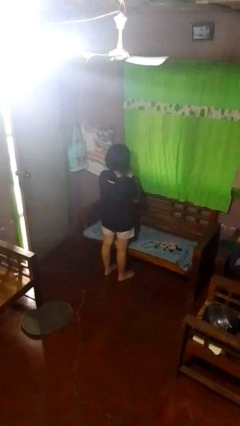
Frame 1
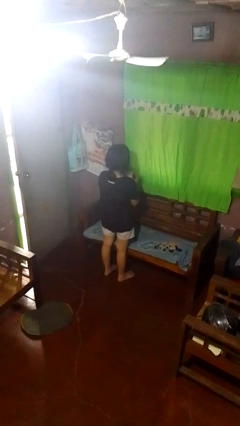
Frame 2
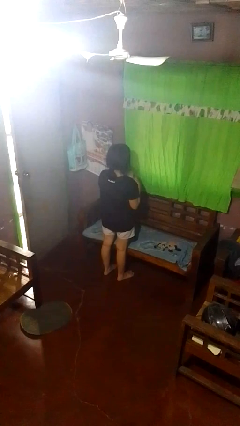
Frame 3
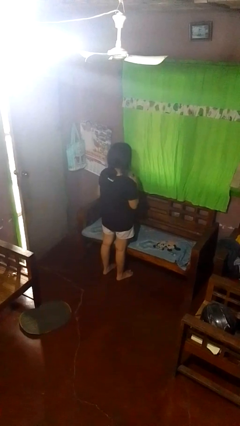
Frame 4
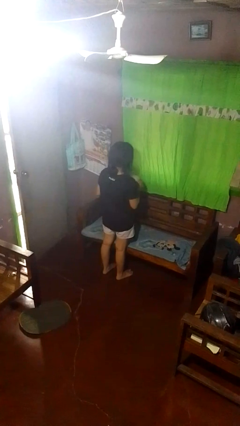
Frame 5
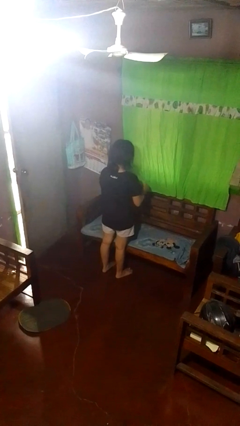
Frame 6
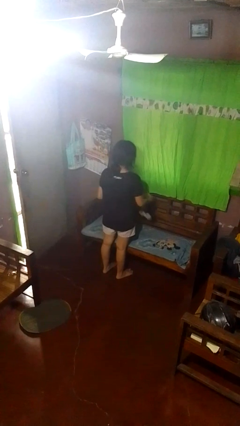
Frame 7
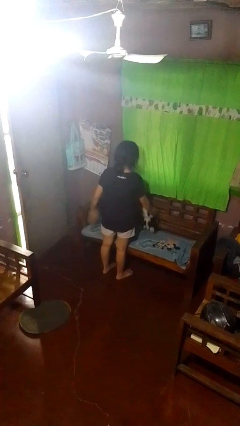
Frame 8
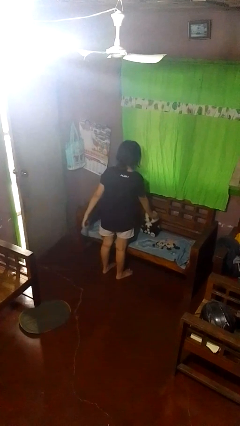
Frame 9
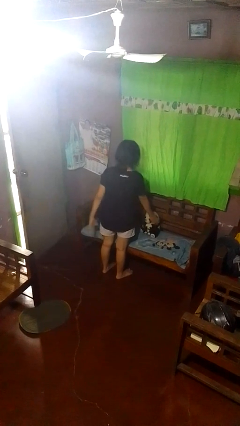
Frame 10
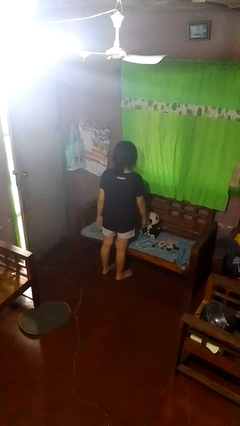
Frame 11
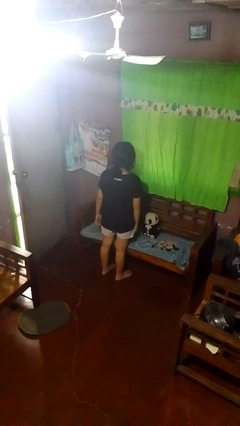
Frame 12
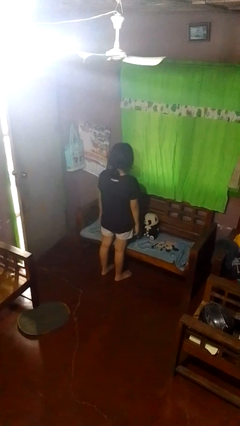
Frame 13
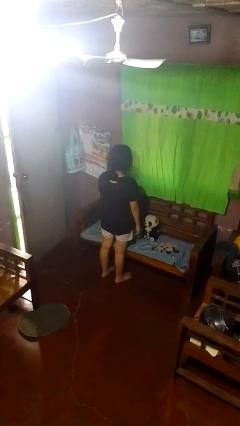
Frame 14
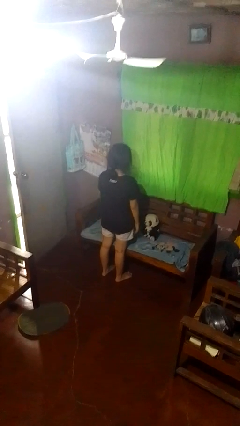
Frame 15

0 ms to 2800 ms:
person puts down object on couch

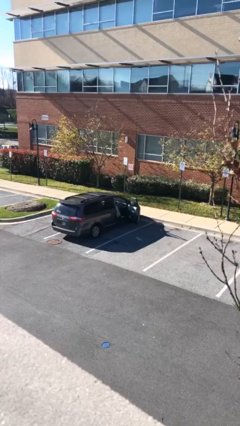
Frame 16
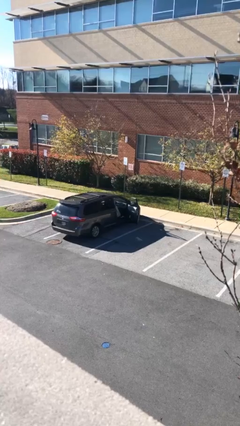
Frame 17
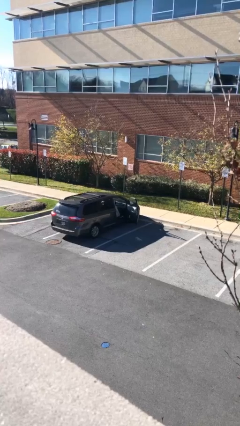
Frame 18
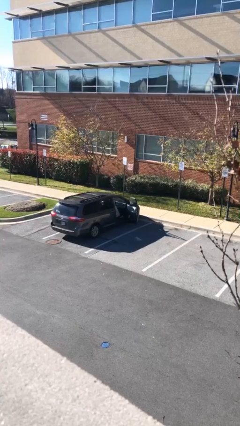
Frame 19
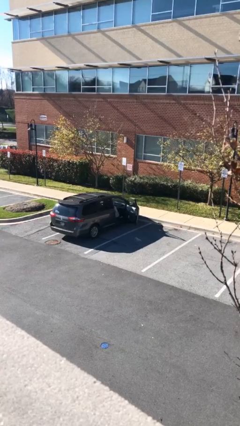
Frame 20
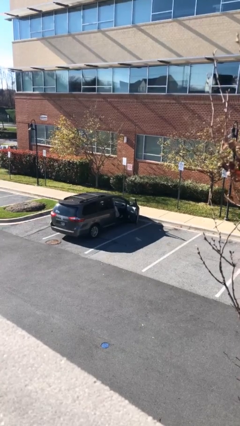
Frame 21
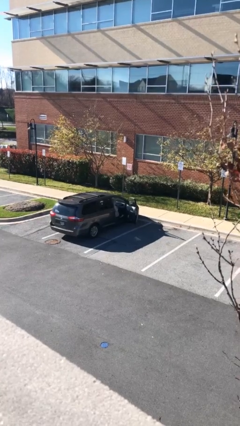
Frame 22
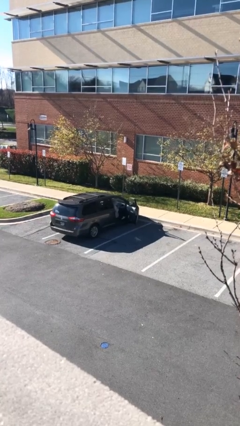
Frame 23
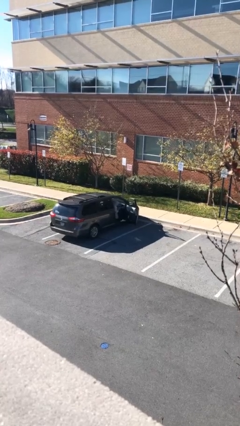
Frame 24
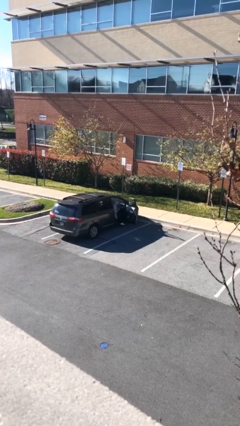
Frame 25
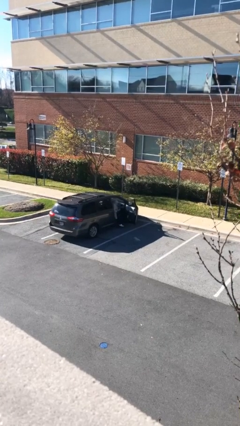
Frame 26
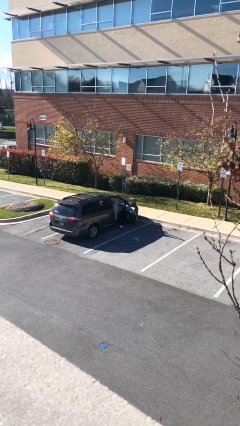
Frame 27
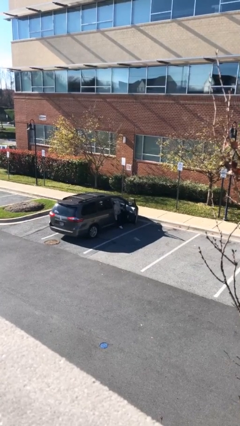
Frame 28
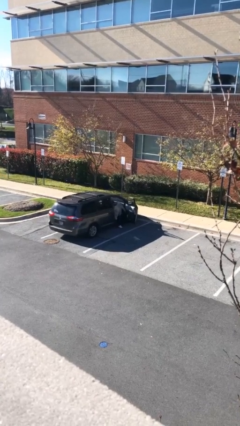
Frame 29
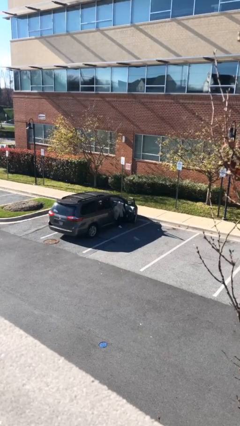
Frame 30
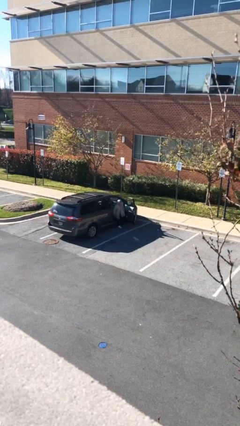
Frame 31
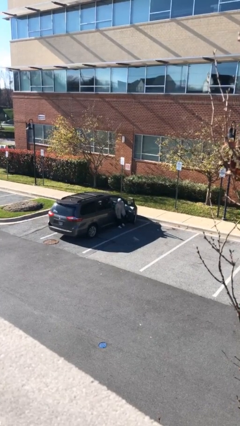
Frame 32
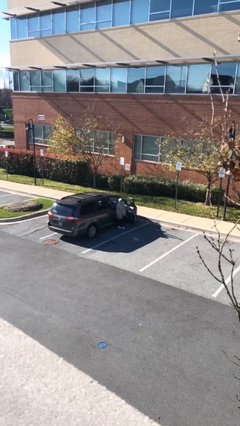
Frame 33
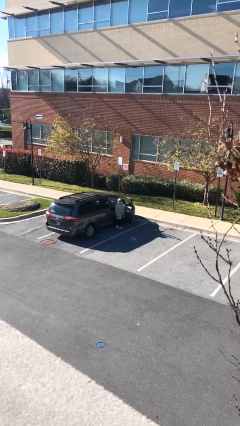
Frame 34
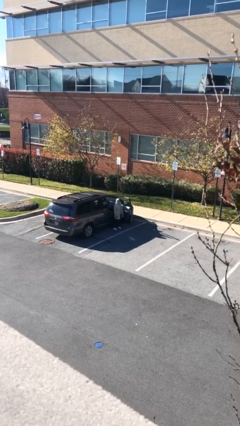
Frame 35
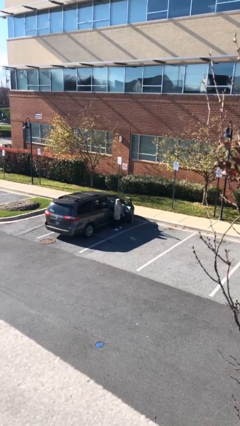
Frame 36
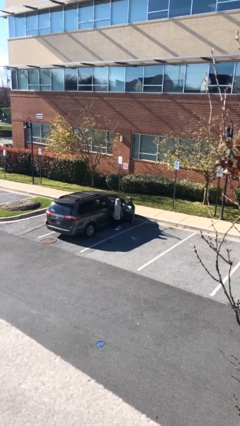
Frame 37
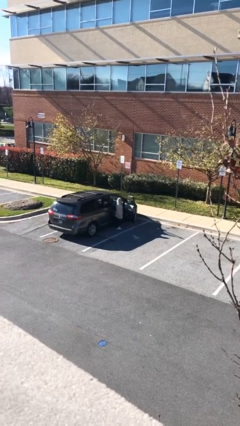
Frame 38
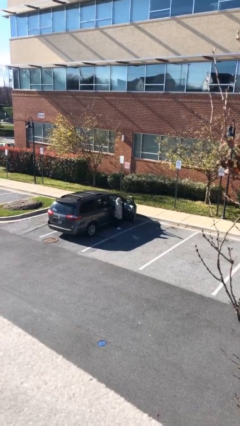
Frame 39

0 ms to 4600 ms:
person exits car

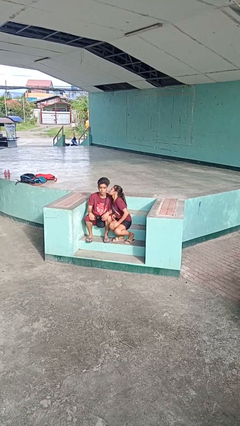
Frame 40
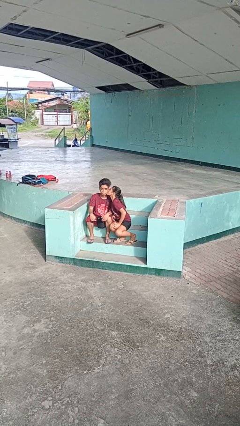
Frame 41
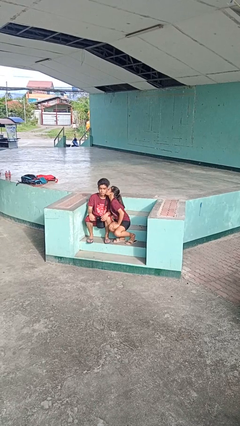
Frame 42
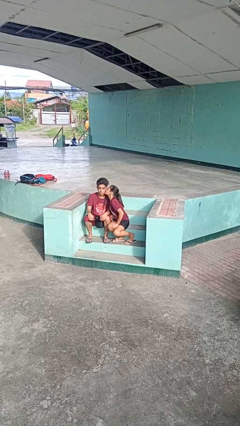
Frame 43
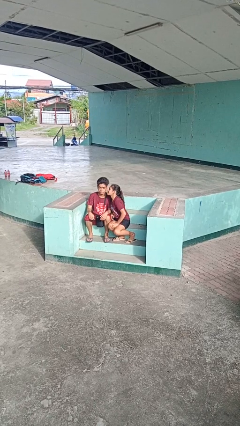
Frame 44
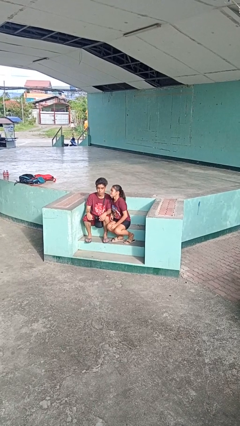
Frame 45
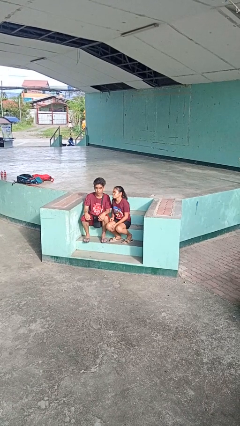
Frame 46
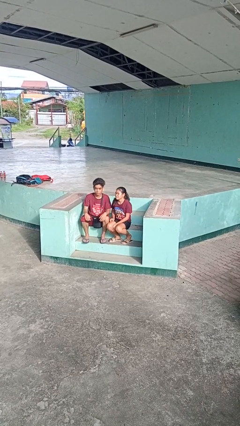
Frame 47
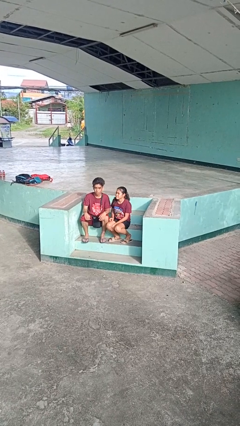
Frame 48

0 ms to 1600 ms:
person kisses cheek of person

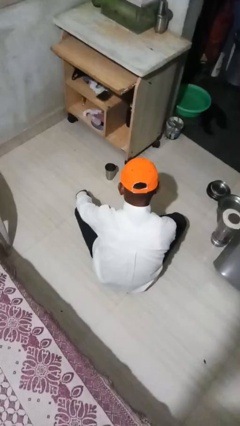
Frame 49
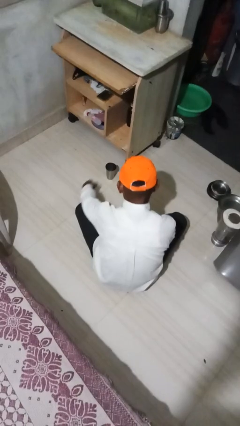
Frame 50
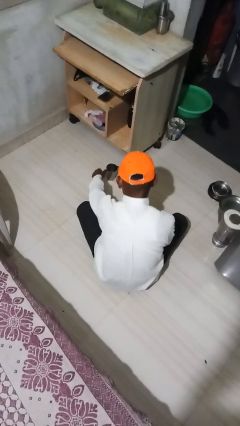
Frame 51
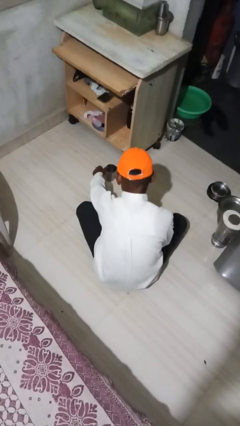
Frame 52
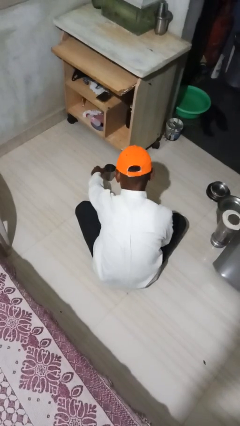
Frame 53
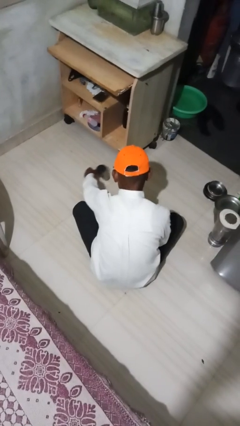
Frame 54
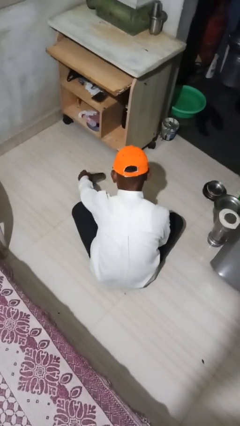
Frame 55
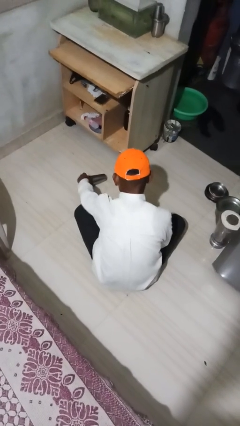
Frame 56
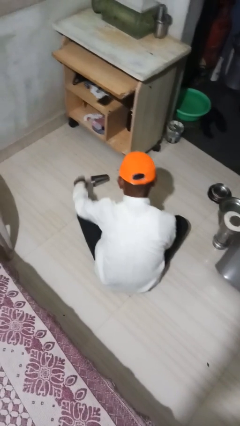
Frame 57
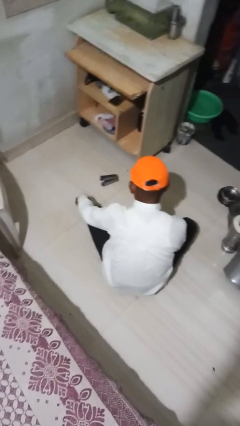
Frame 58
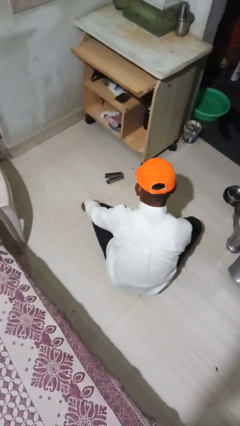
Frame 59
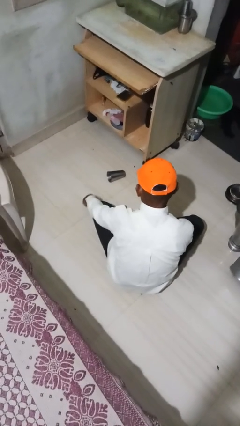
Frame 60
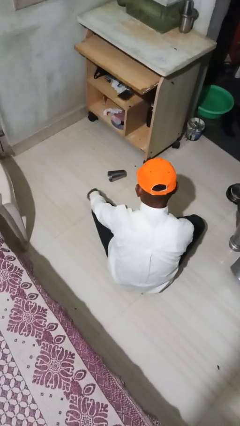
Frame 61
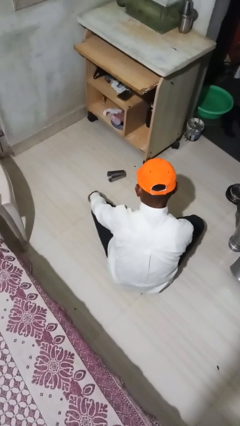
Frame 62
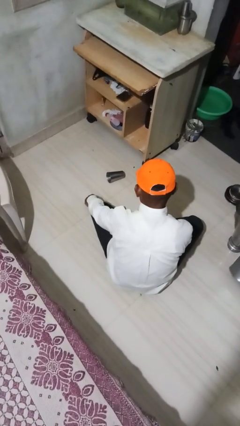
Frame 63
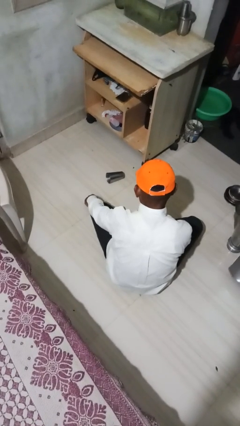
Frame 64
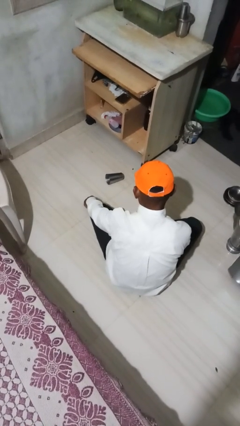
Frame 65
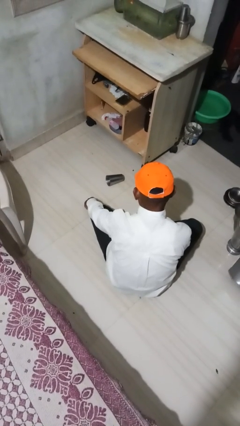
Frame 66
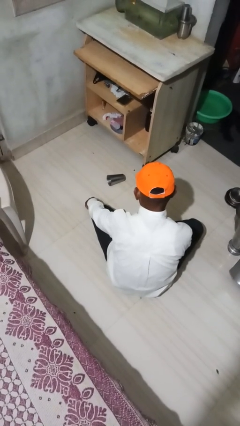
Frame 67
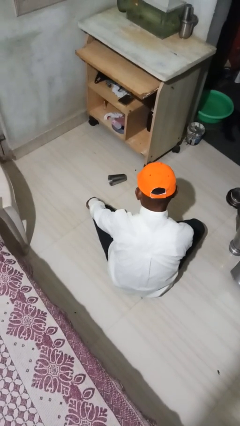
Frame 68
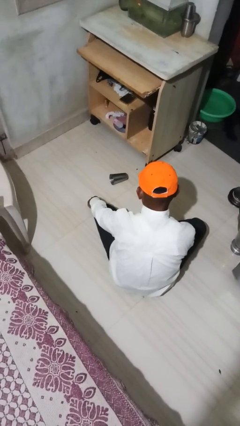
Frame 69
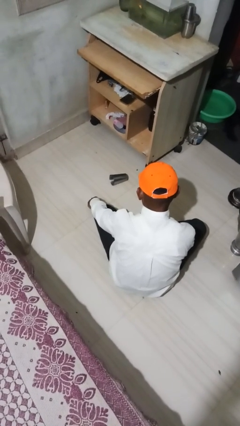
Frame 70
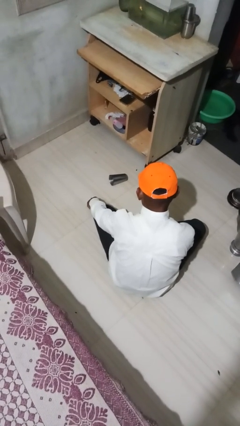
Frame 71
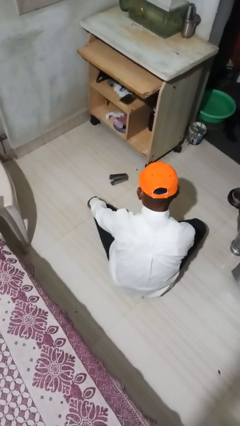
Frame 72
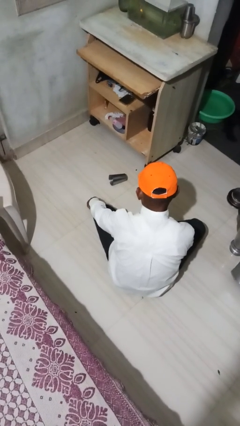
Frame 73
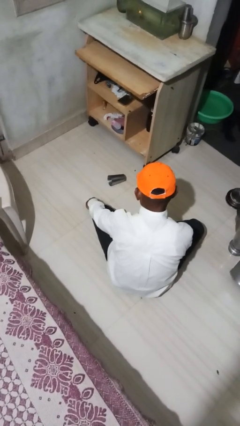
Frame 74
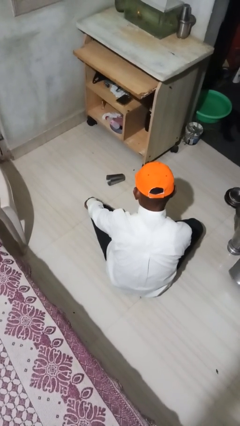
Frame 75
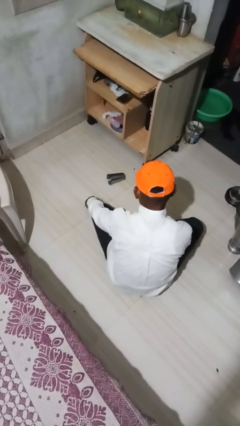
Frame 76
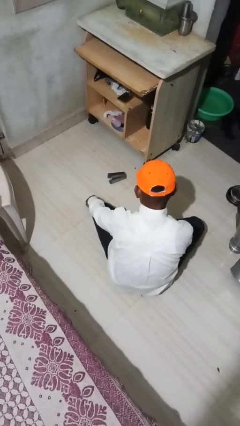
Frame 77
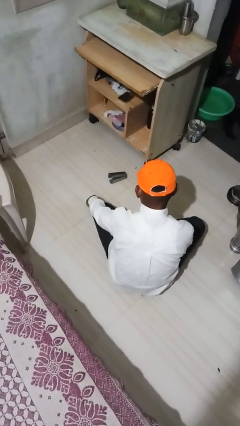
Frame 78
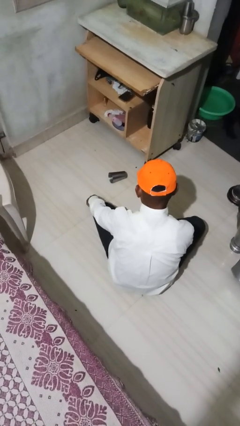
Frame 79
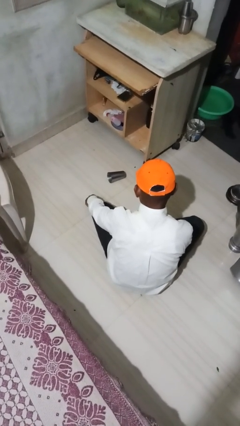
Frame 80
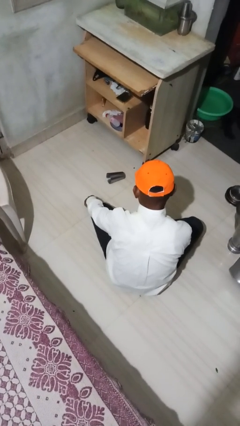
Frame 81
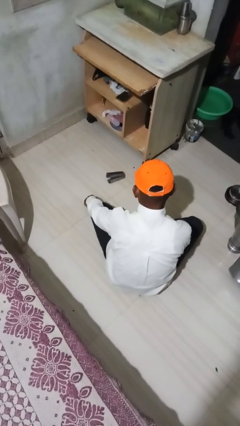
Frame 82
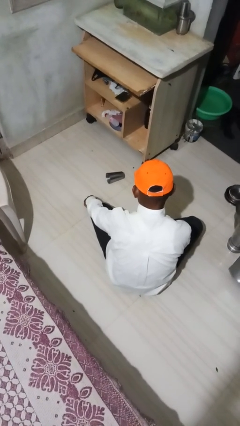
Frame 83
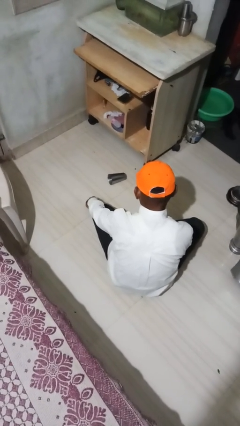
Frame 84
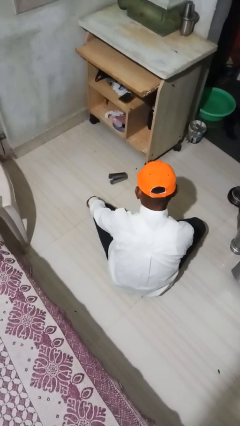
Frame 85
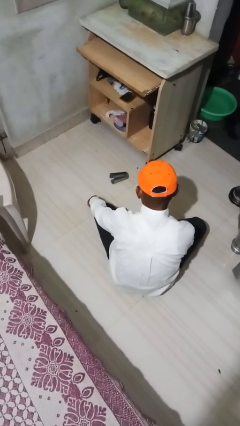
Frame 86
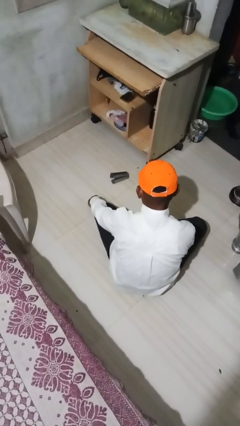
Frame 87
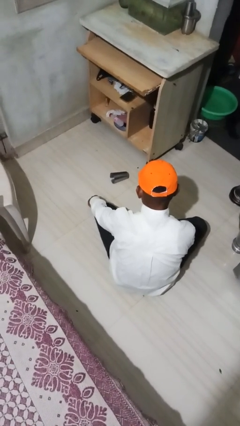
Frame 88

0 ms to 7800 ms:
person spills on floor

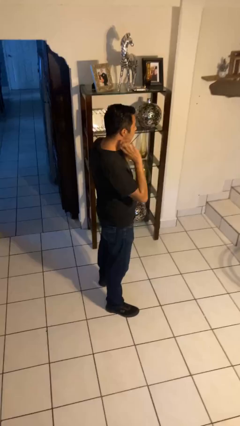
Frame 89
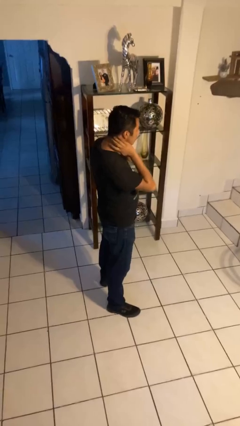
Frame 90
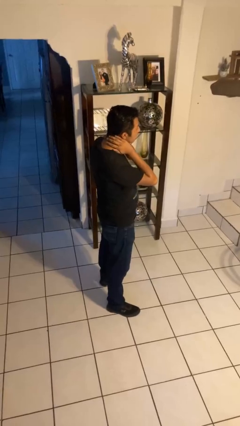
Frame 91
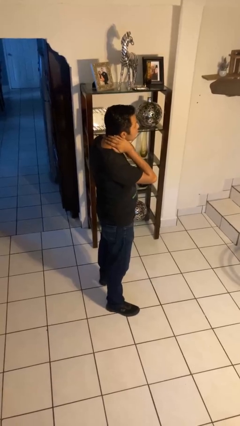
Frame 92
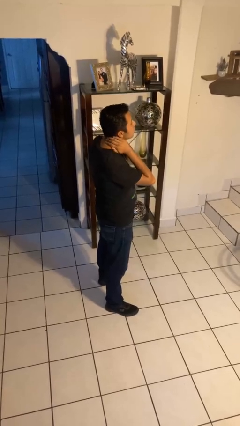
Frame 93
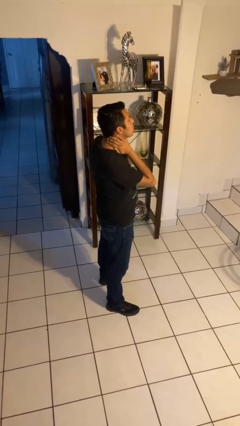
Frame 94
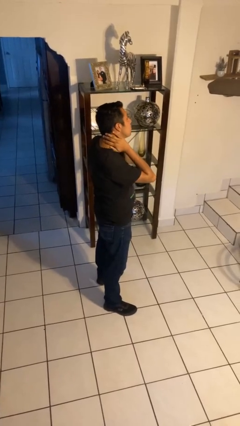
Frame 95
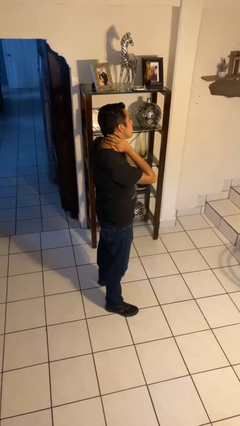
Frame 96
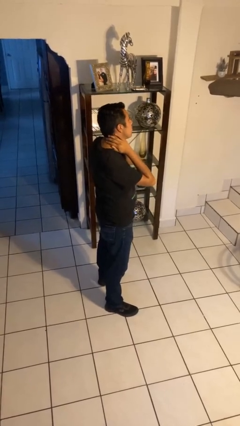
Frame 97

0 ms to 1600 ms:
person rubs neck
